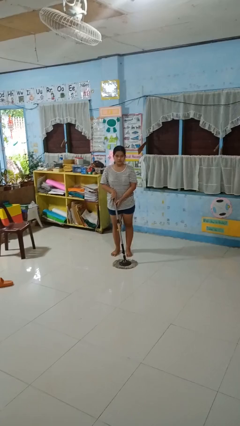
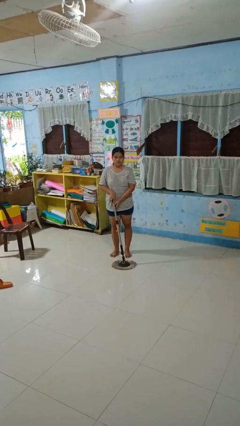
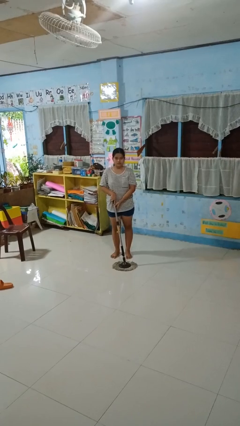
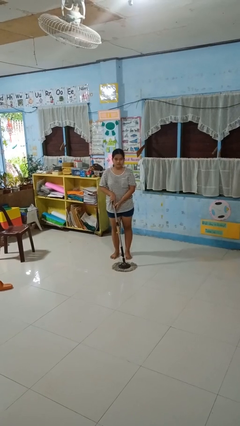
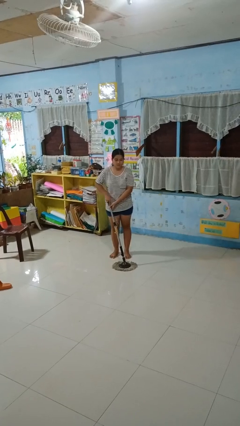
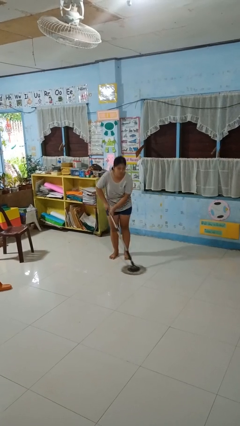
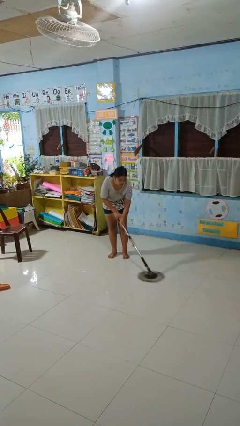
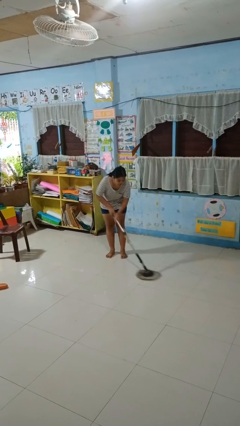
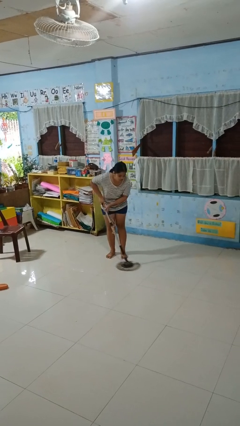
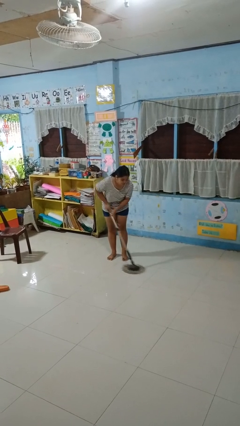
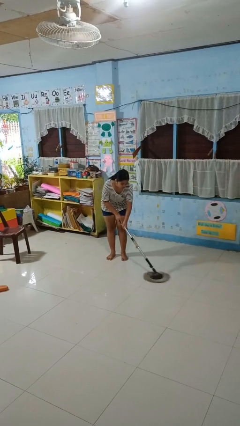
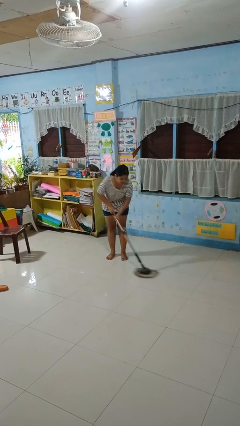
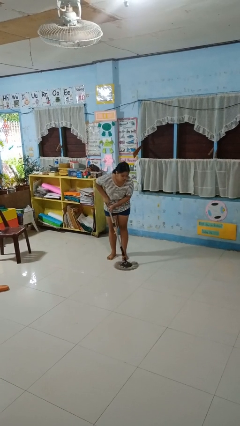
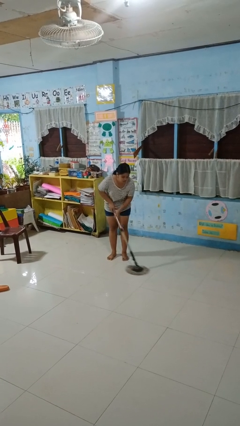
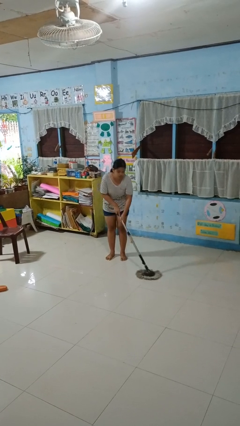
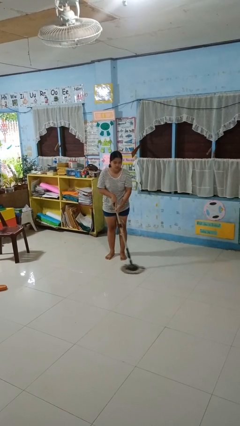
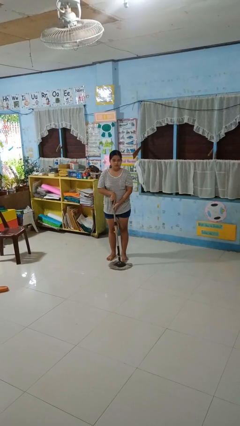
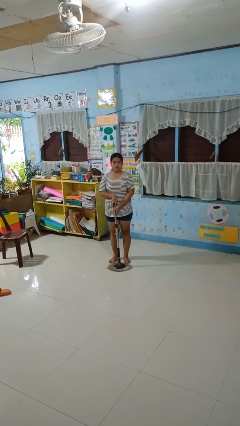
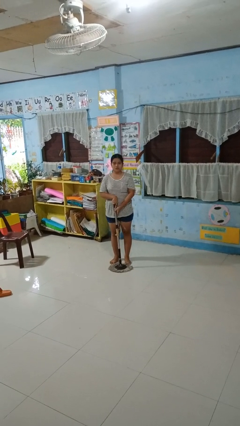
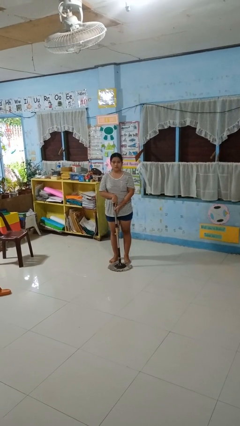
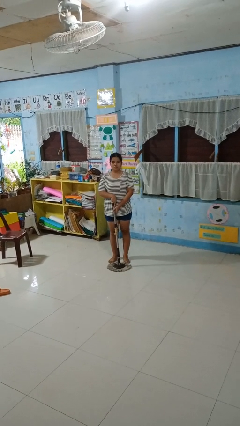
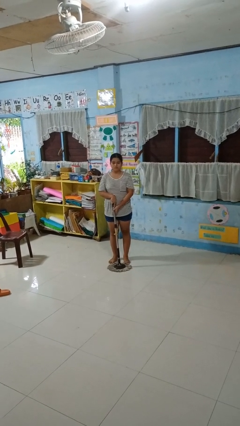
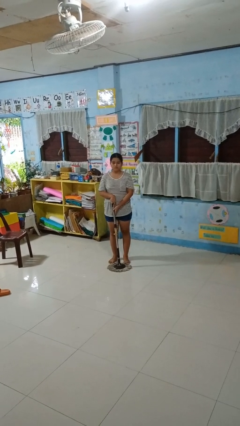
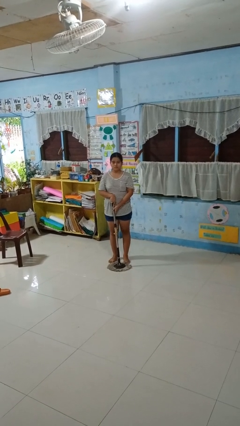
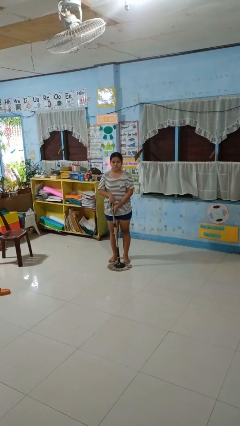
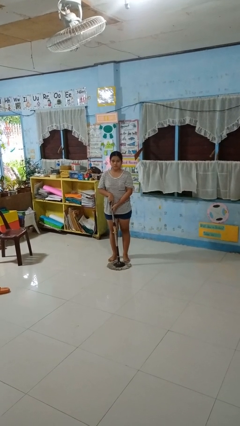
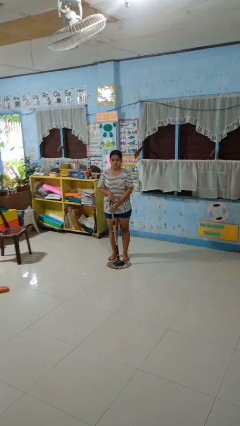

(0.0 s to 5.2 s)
person mops

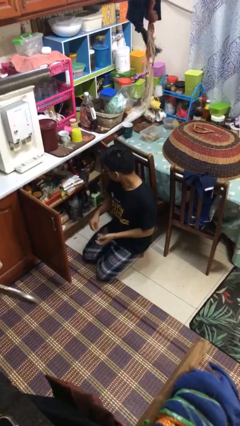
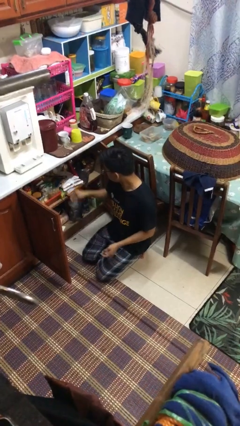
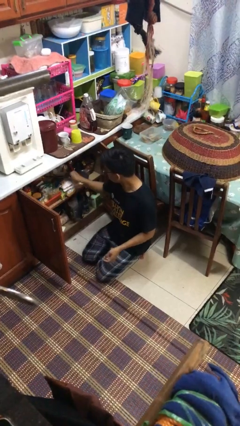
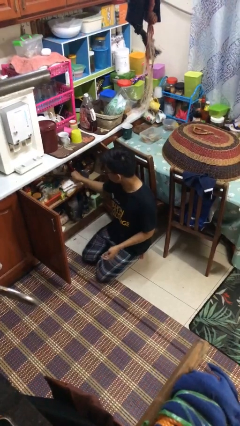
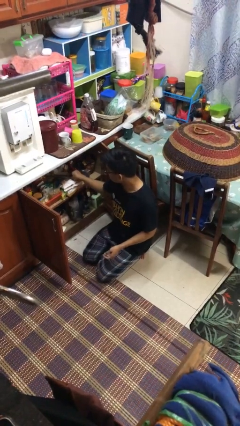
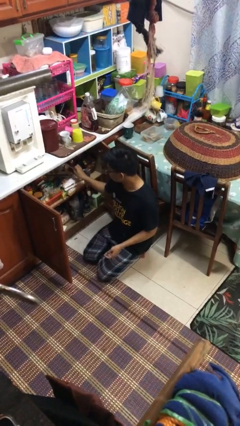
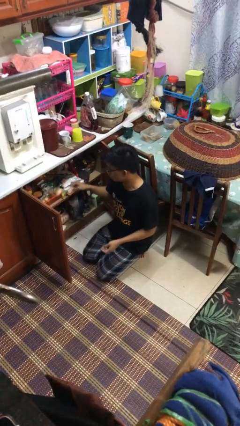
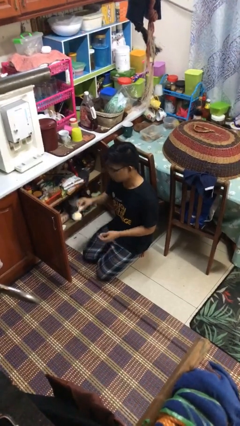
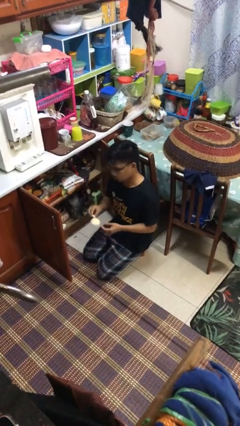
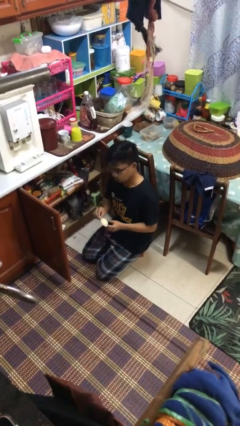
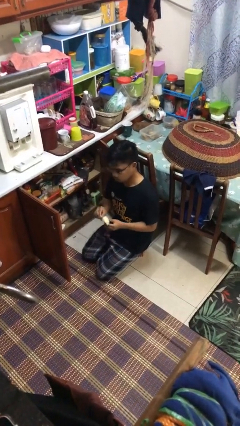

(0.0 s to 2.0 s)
person takes object from kitchen drawer

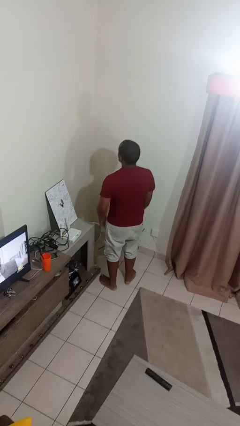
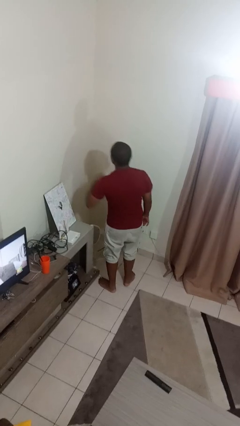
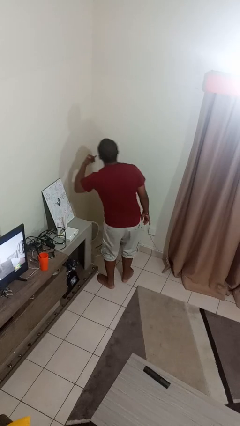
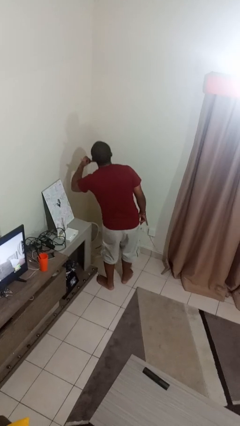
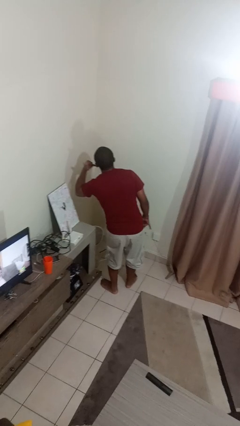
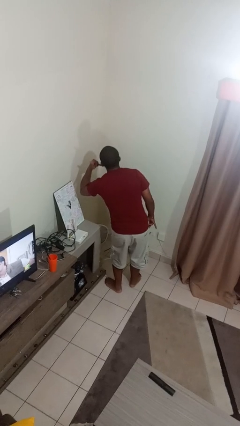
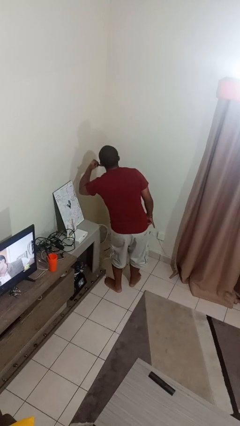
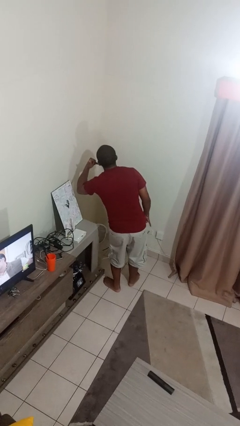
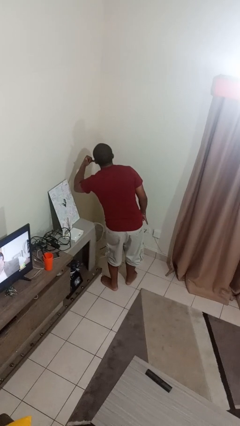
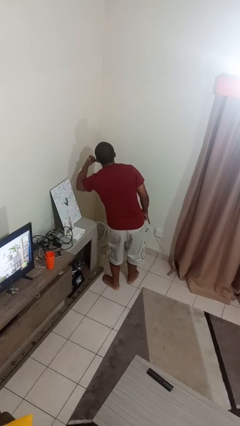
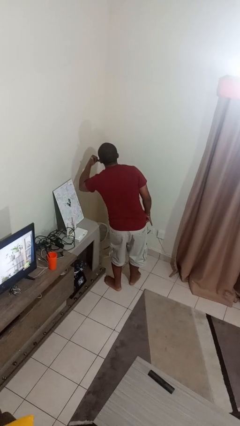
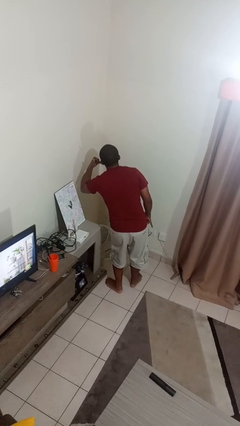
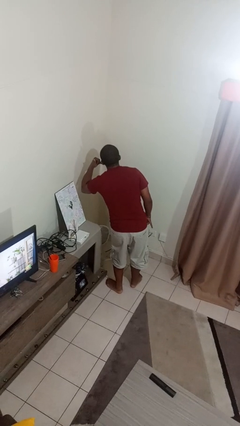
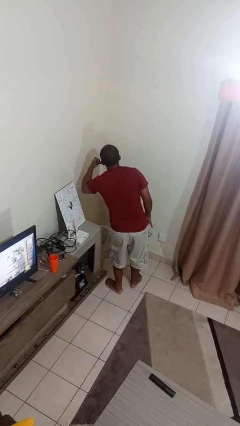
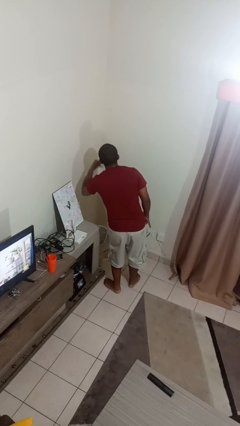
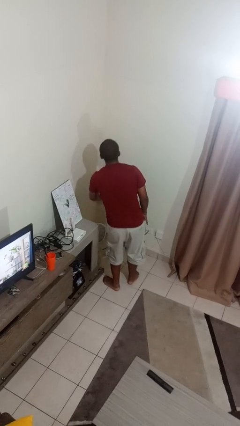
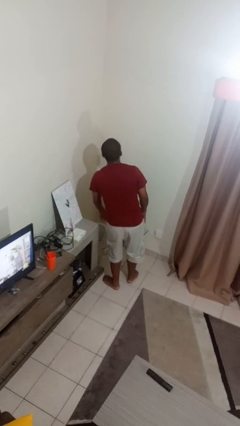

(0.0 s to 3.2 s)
person gestures call me

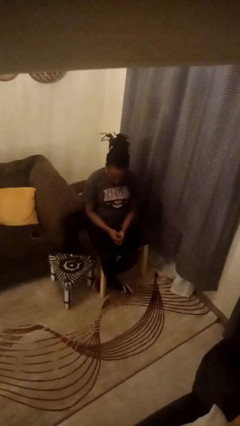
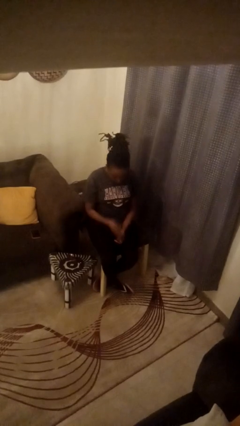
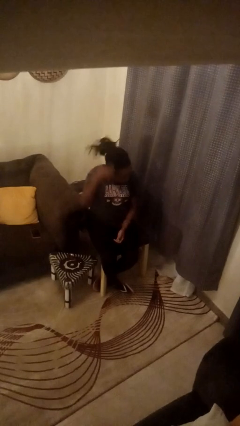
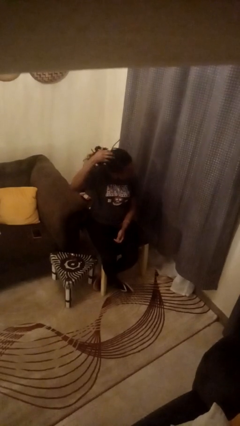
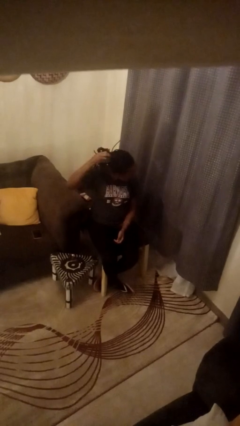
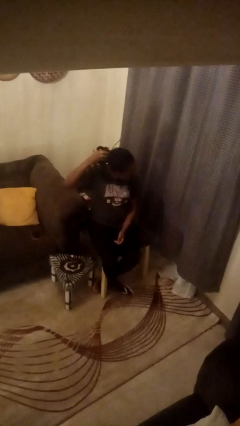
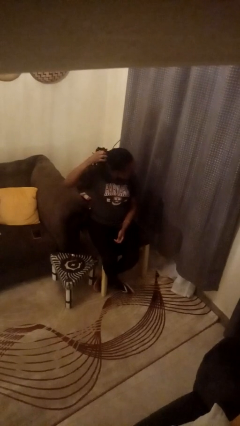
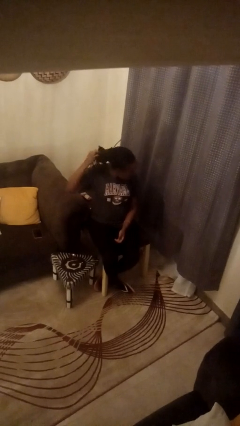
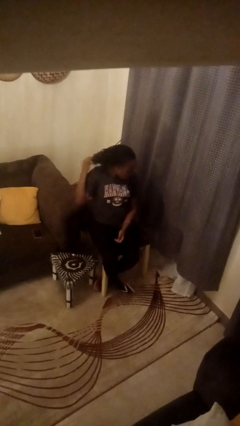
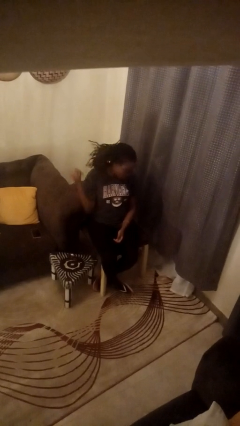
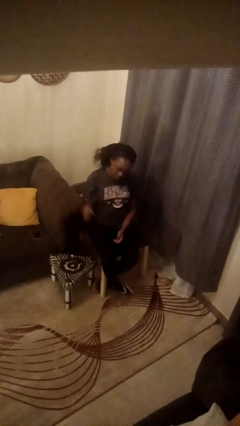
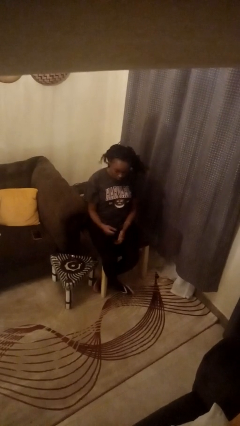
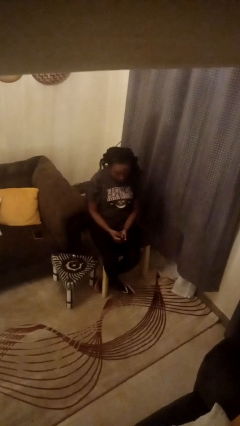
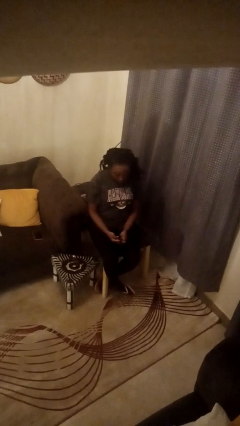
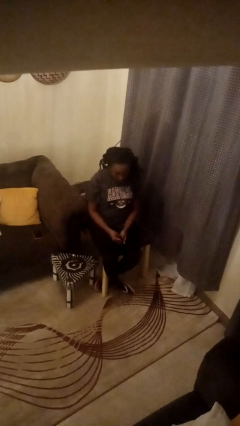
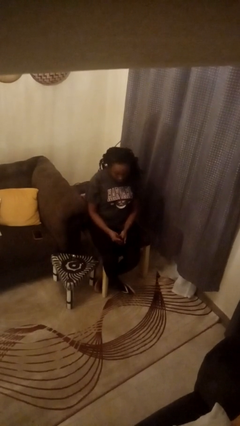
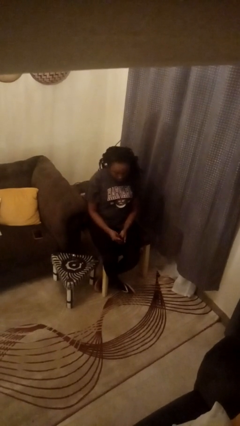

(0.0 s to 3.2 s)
person takes off hairtie

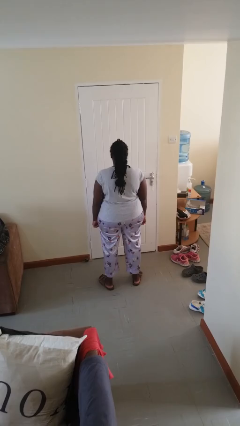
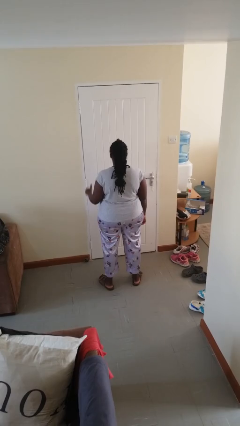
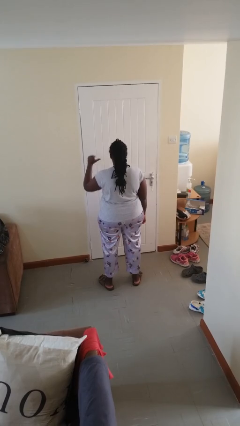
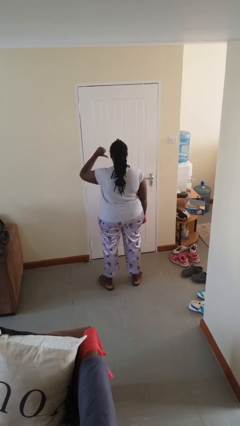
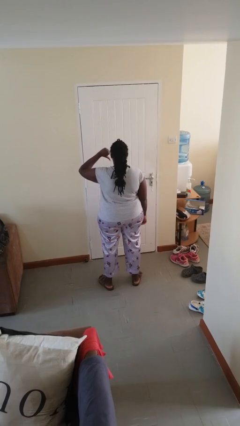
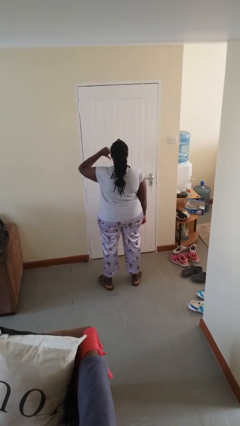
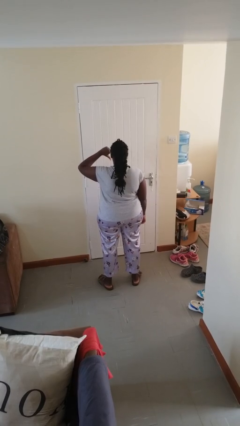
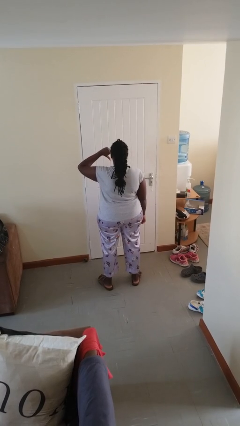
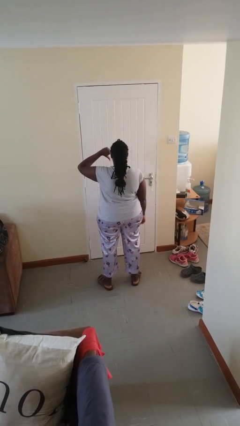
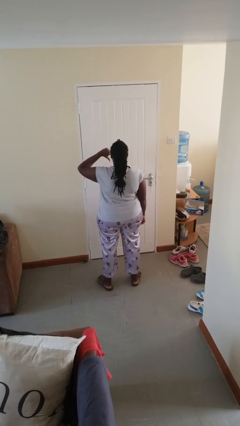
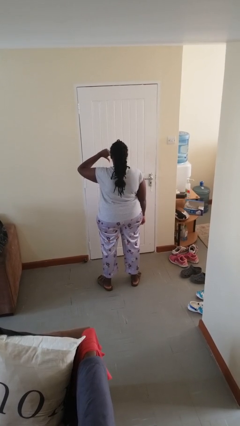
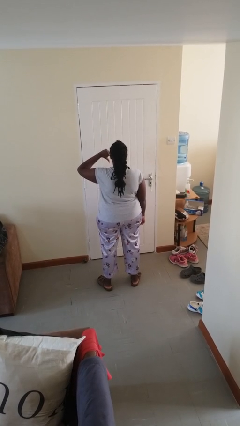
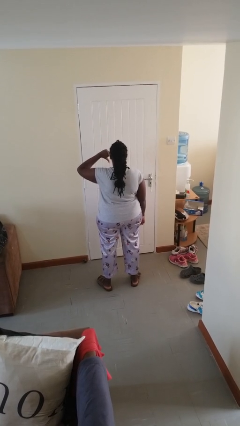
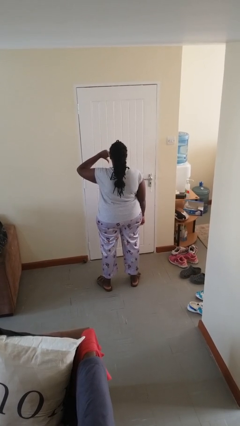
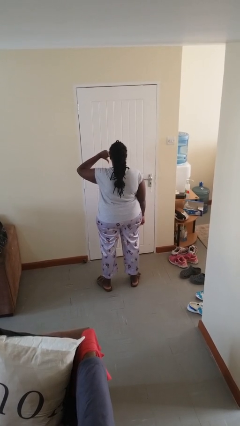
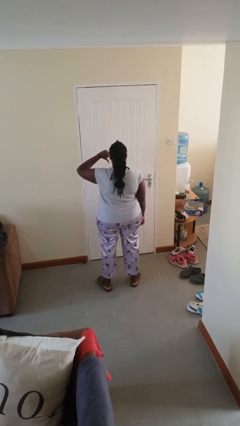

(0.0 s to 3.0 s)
person gestures thumbs down

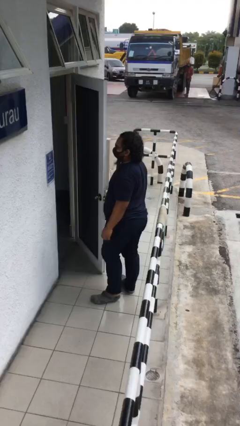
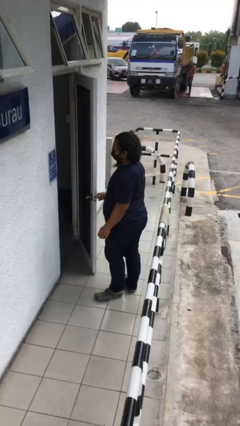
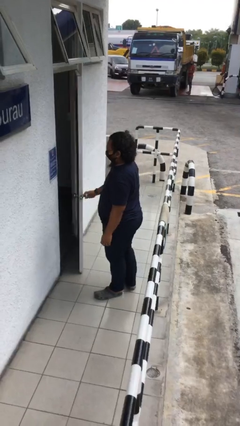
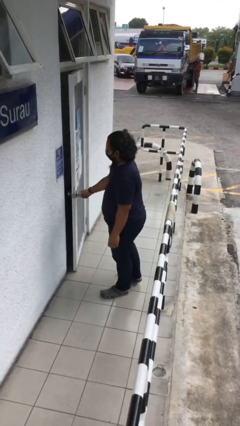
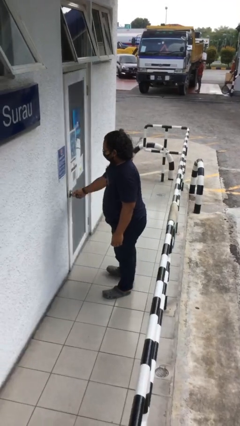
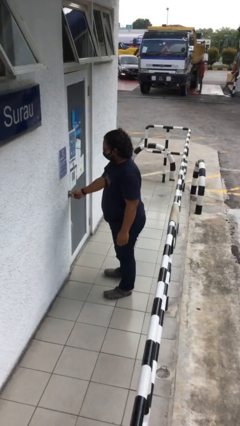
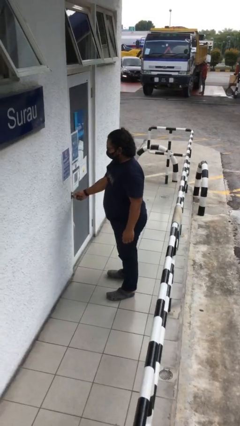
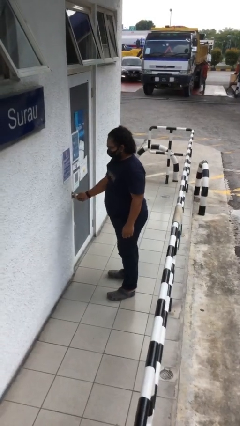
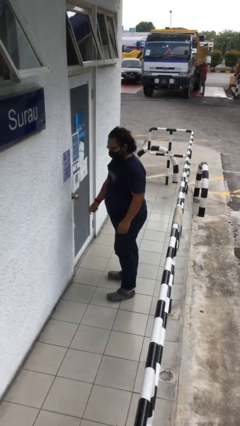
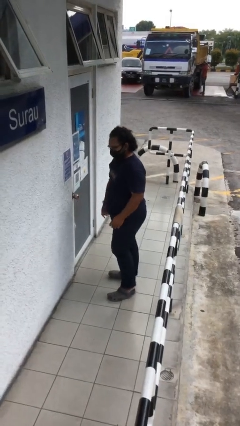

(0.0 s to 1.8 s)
person closes facility door
